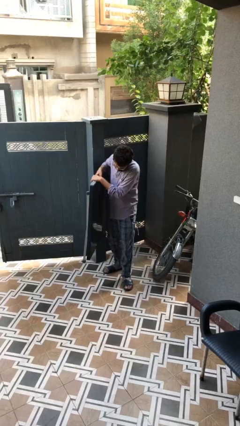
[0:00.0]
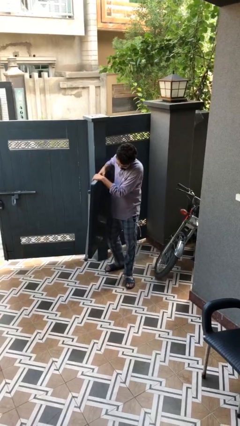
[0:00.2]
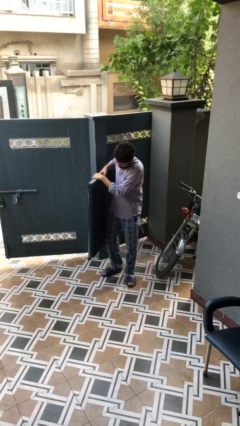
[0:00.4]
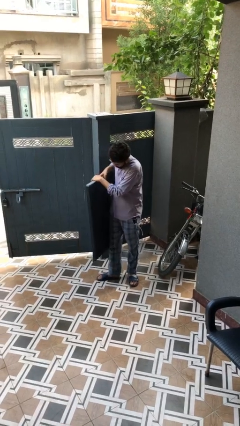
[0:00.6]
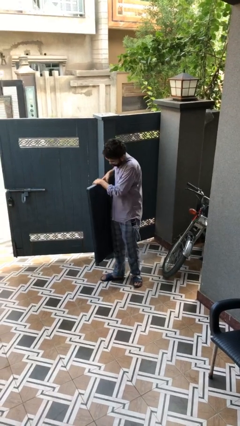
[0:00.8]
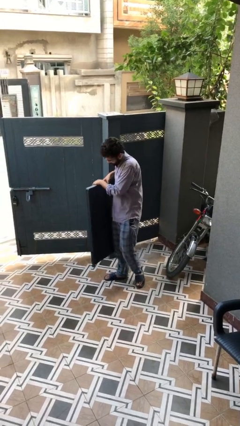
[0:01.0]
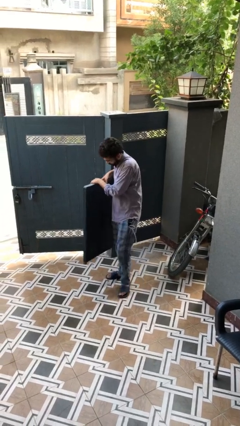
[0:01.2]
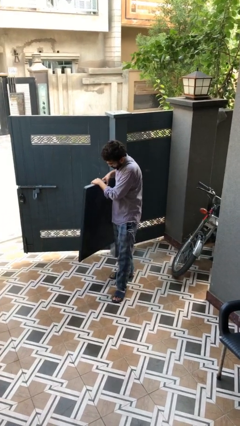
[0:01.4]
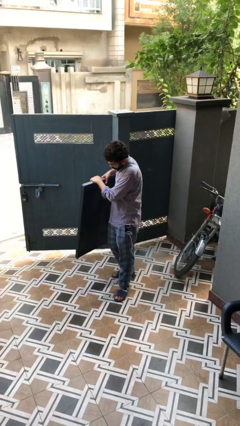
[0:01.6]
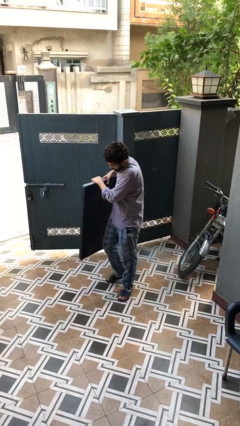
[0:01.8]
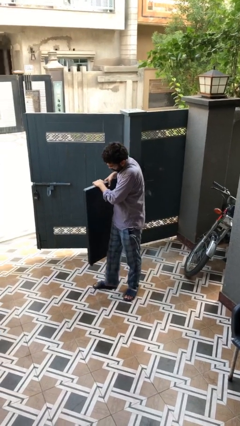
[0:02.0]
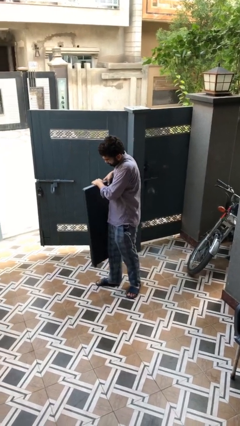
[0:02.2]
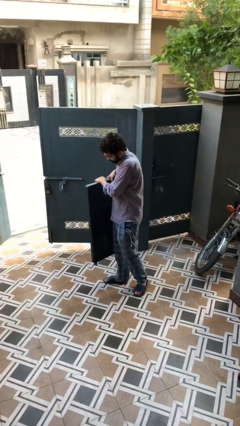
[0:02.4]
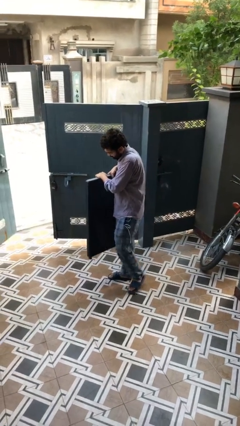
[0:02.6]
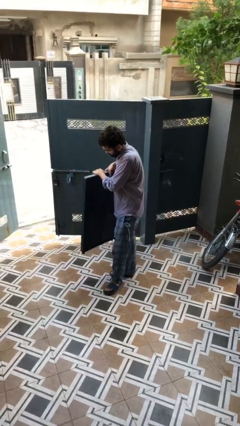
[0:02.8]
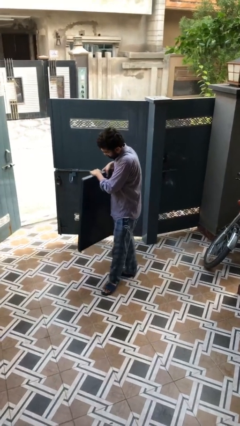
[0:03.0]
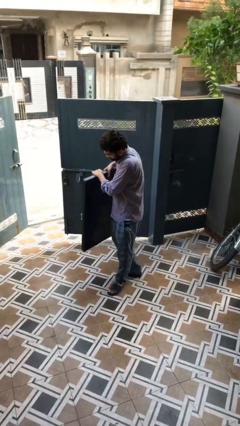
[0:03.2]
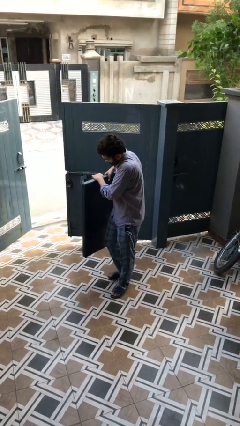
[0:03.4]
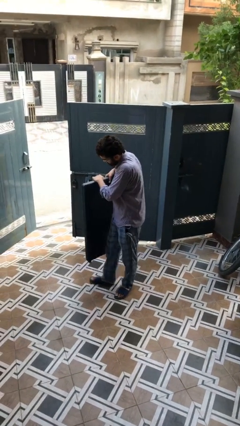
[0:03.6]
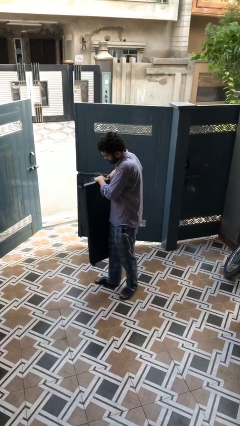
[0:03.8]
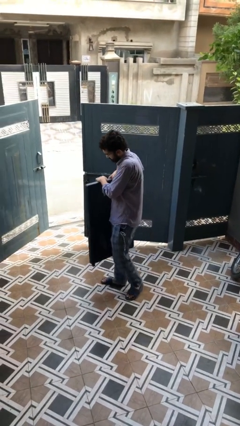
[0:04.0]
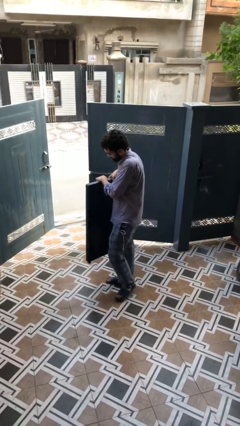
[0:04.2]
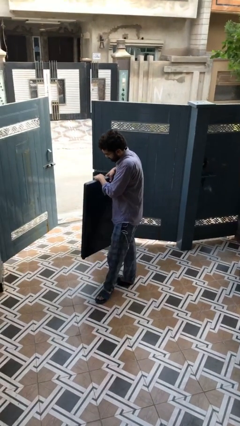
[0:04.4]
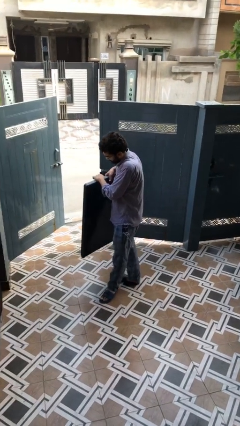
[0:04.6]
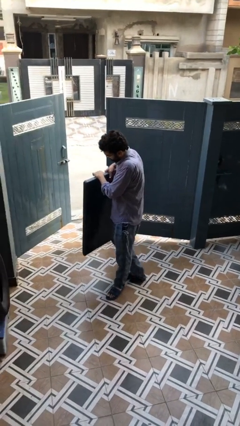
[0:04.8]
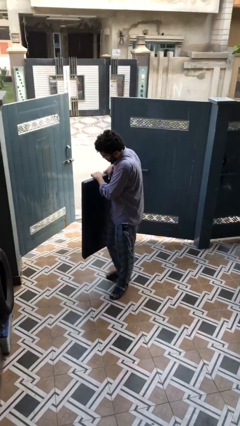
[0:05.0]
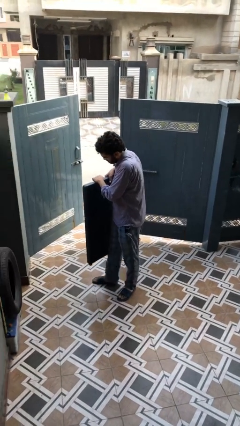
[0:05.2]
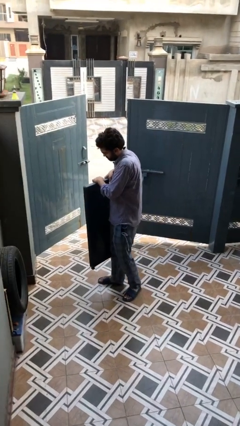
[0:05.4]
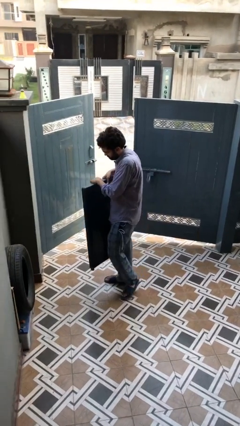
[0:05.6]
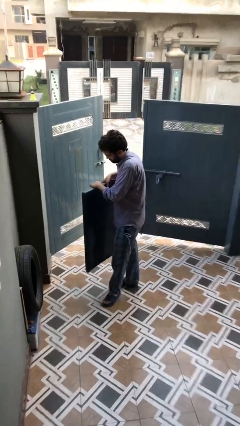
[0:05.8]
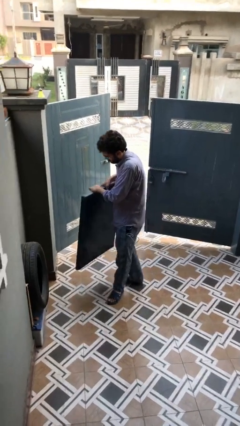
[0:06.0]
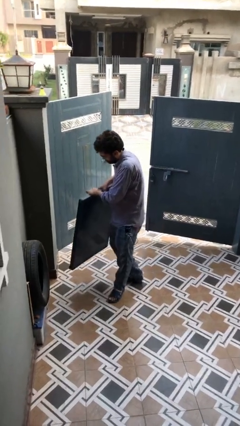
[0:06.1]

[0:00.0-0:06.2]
person carries heavy object

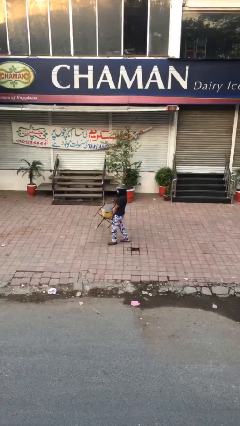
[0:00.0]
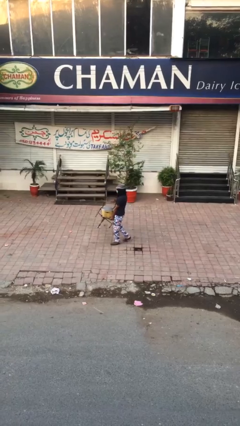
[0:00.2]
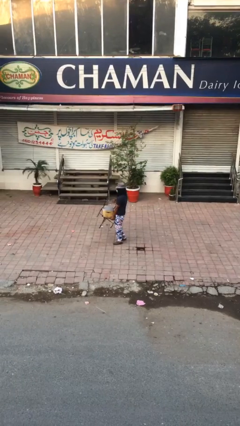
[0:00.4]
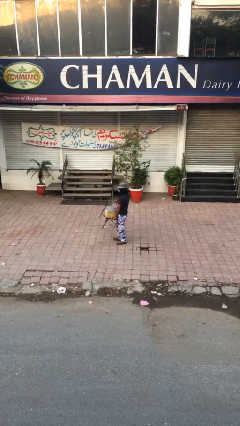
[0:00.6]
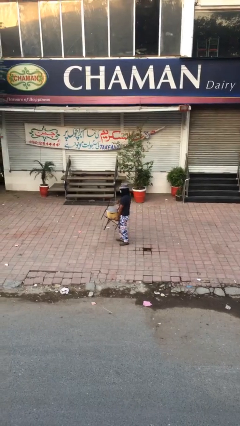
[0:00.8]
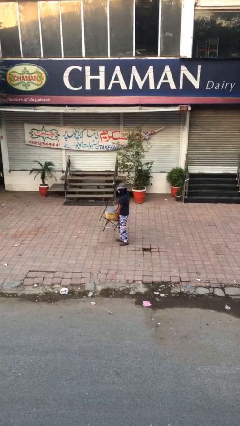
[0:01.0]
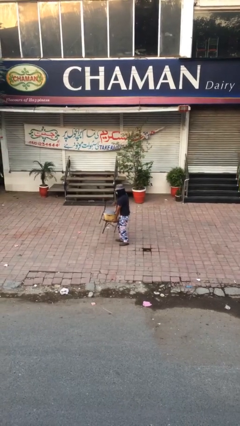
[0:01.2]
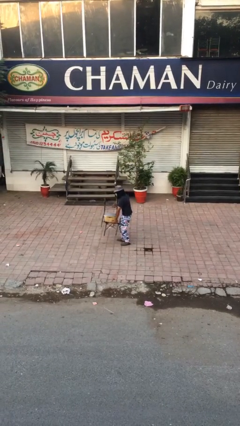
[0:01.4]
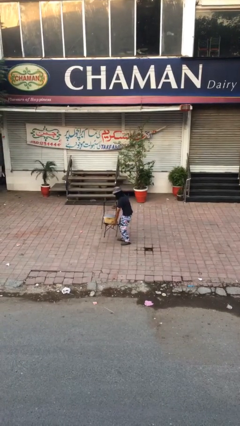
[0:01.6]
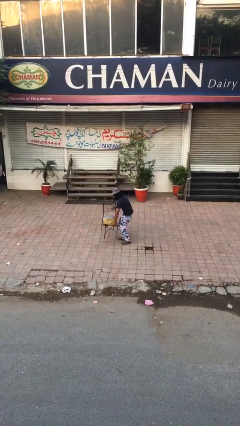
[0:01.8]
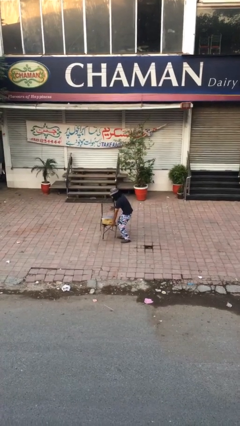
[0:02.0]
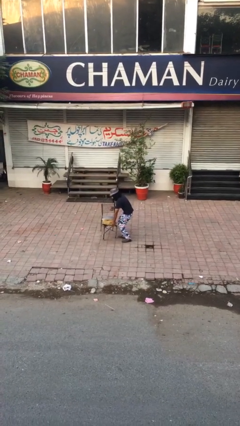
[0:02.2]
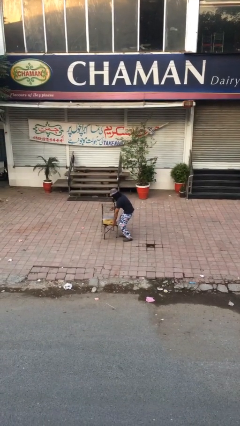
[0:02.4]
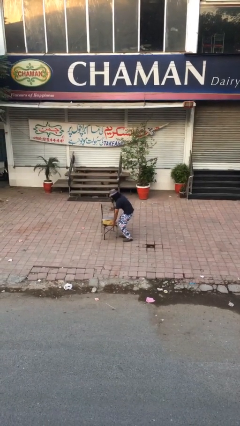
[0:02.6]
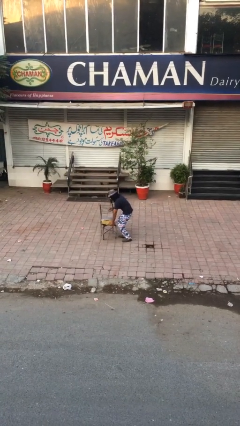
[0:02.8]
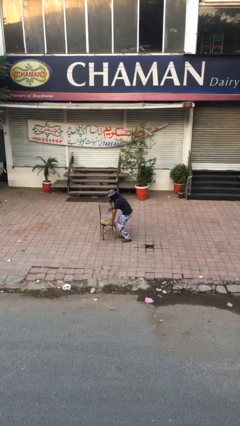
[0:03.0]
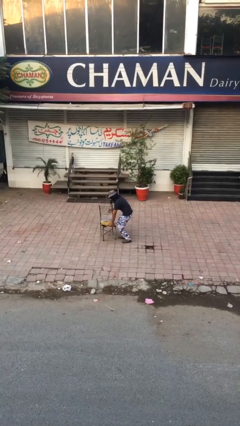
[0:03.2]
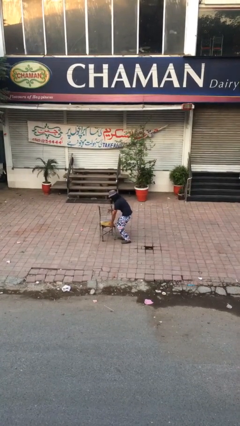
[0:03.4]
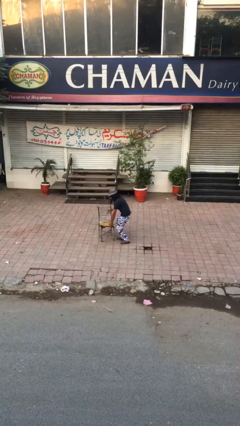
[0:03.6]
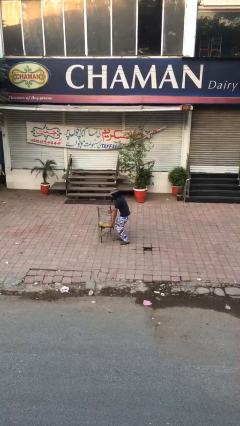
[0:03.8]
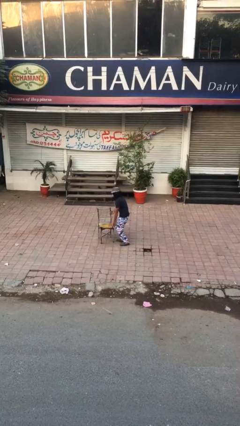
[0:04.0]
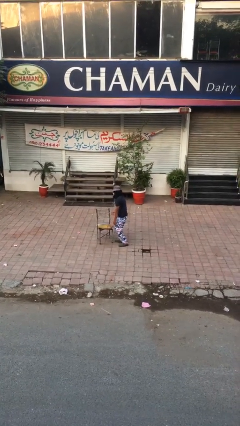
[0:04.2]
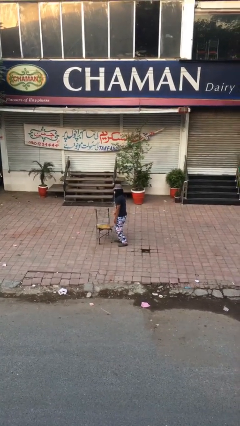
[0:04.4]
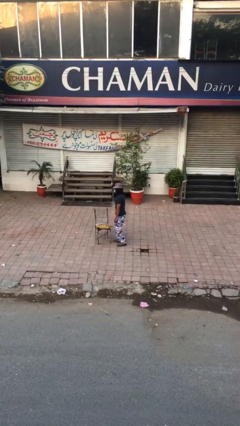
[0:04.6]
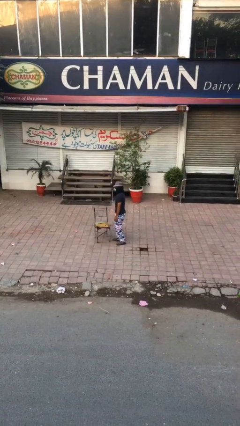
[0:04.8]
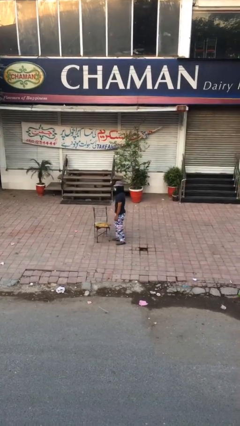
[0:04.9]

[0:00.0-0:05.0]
person puts down object on floor

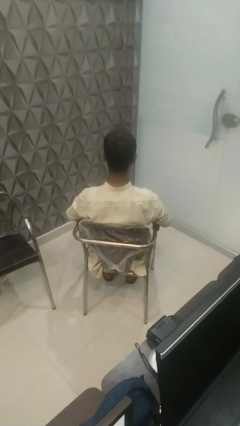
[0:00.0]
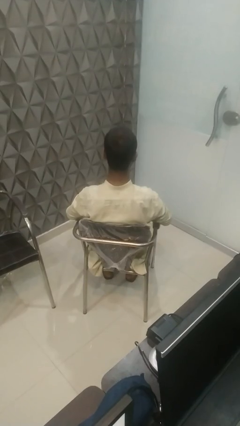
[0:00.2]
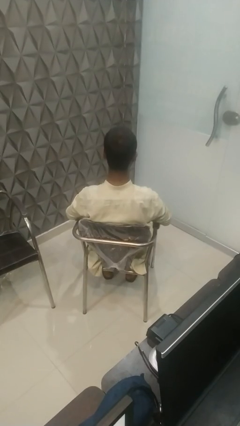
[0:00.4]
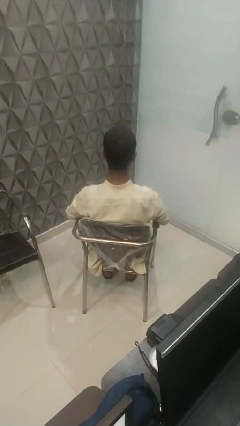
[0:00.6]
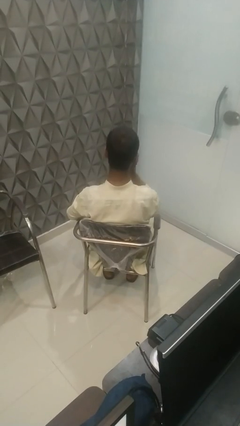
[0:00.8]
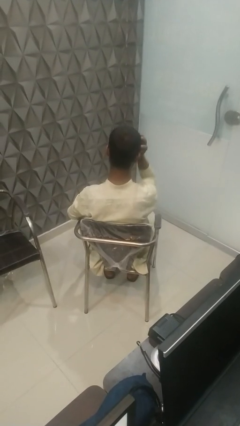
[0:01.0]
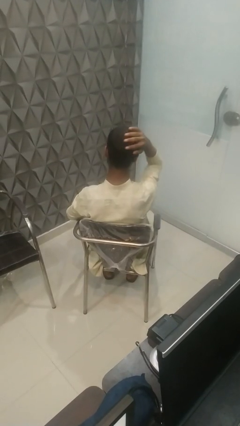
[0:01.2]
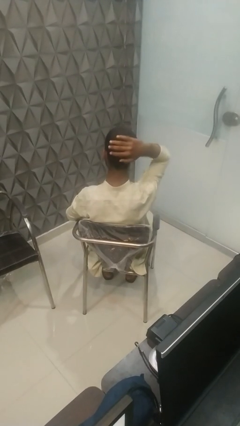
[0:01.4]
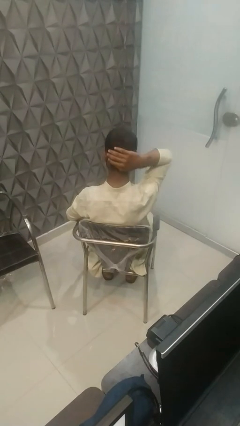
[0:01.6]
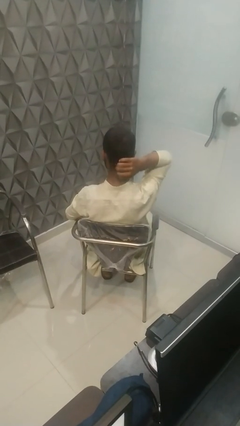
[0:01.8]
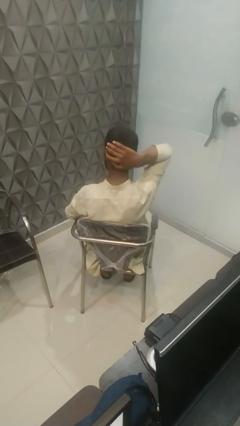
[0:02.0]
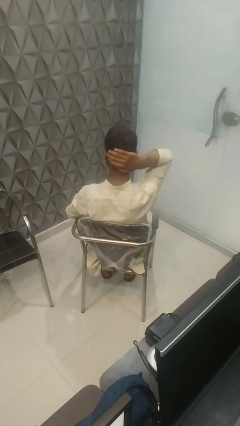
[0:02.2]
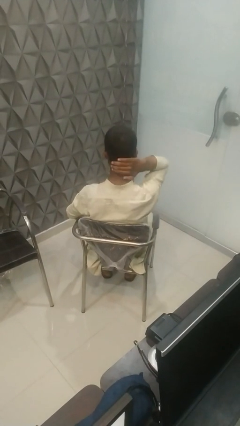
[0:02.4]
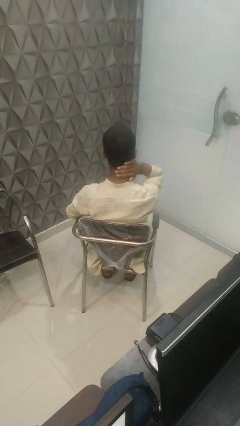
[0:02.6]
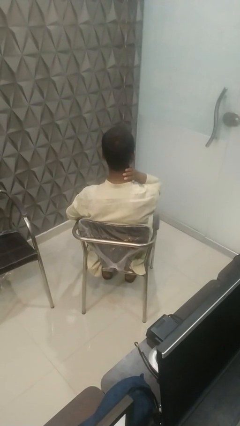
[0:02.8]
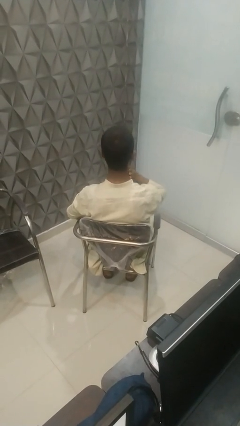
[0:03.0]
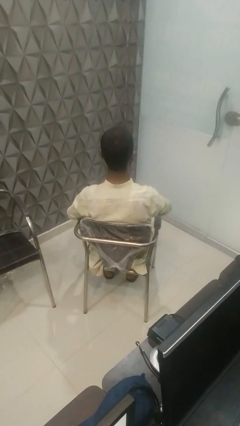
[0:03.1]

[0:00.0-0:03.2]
person strokes hair

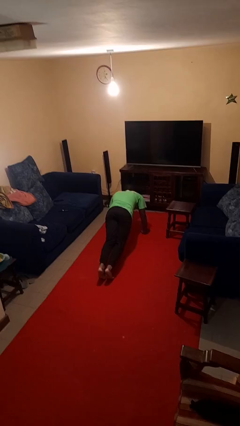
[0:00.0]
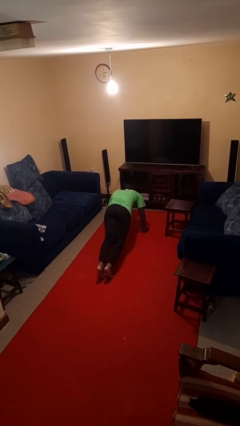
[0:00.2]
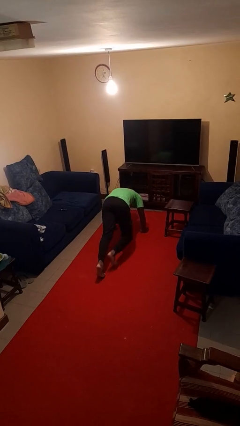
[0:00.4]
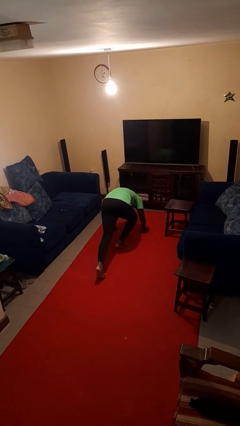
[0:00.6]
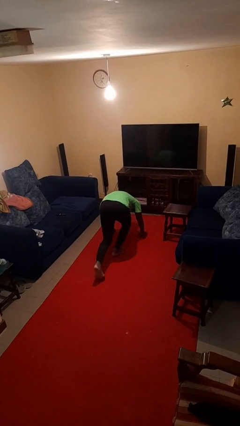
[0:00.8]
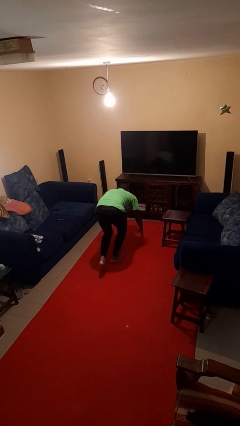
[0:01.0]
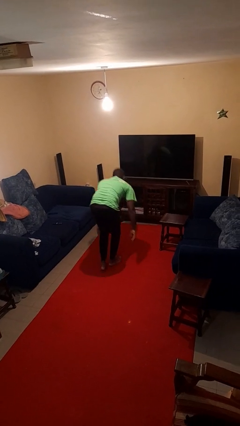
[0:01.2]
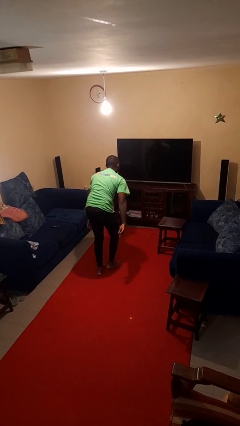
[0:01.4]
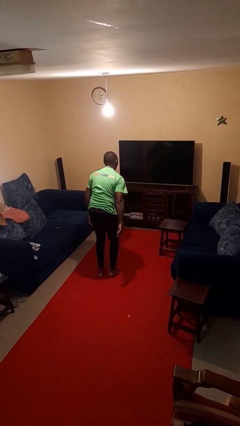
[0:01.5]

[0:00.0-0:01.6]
person stands up from floor

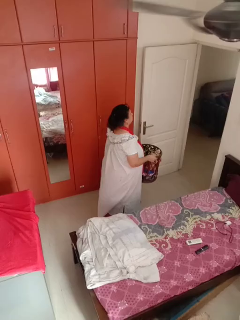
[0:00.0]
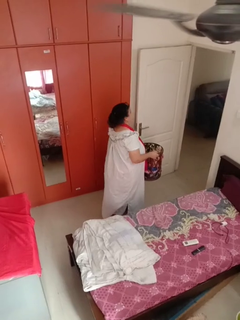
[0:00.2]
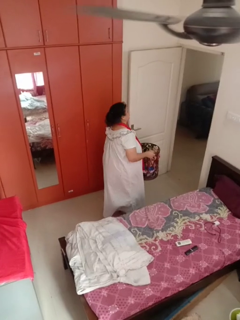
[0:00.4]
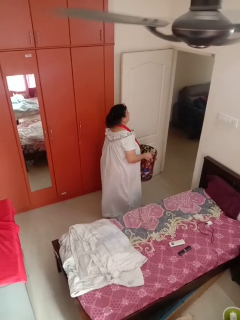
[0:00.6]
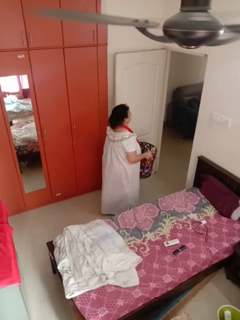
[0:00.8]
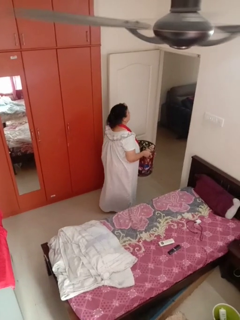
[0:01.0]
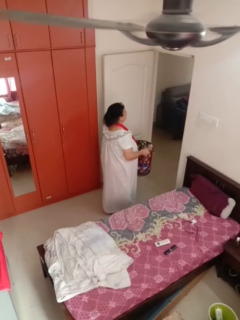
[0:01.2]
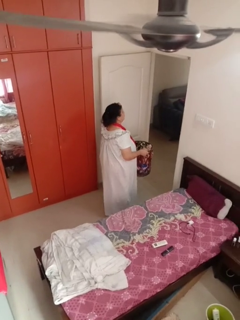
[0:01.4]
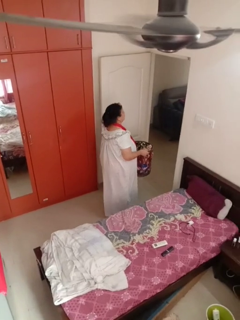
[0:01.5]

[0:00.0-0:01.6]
person carries laundry basket

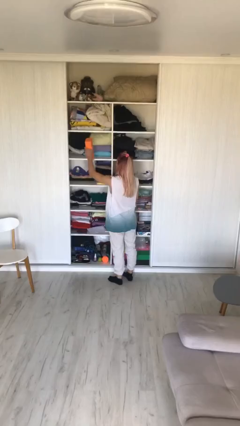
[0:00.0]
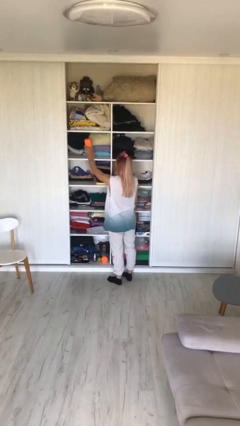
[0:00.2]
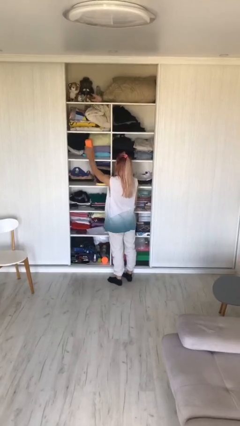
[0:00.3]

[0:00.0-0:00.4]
person puts down object on shelf

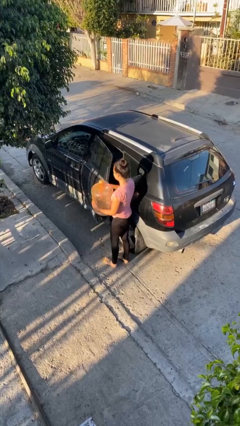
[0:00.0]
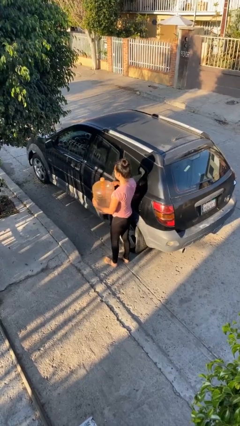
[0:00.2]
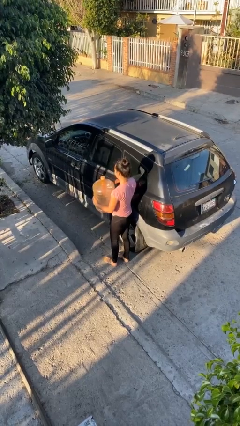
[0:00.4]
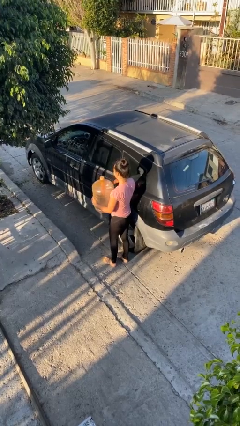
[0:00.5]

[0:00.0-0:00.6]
person closes car door
